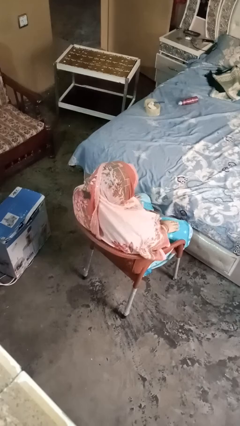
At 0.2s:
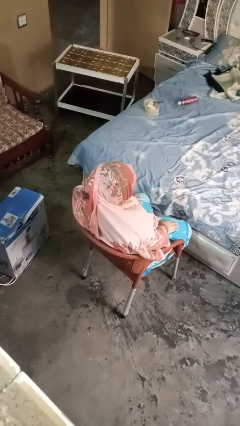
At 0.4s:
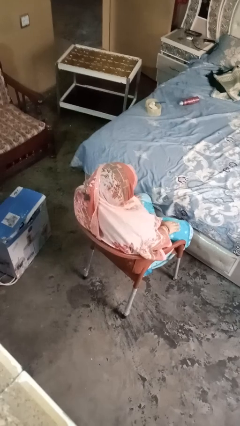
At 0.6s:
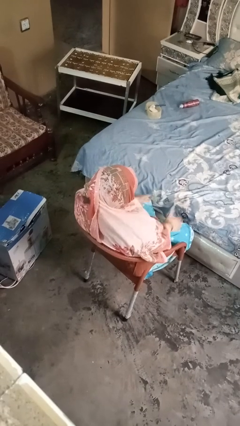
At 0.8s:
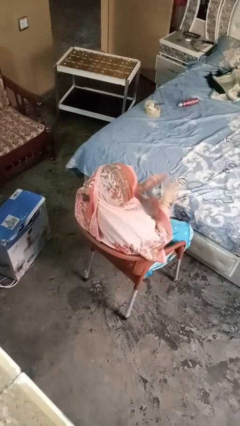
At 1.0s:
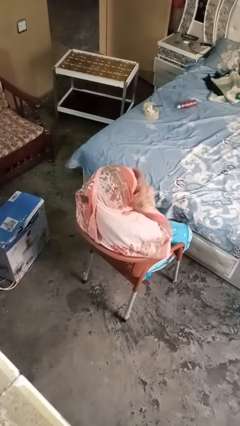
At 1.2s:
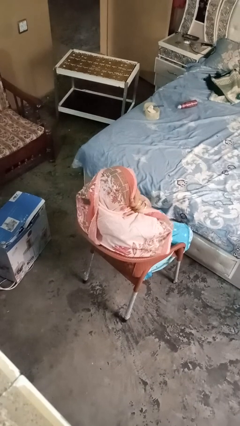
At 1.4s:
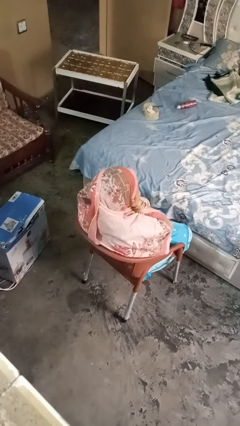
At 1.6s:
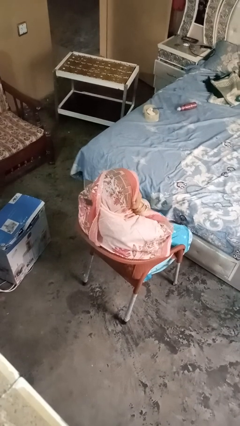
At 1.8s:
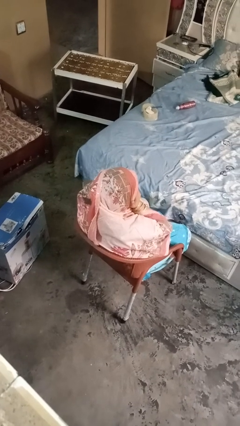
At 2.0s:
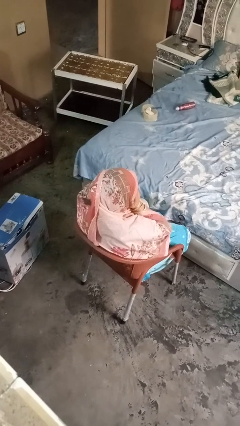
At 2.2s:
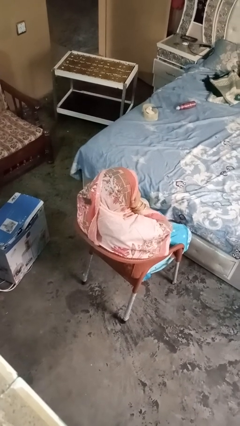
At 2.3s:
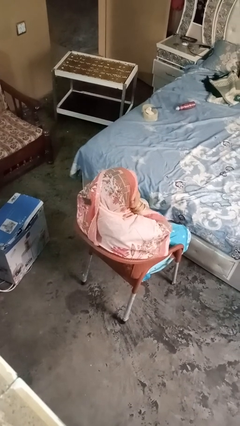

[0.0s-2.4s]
person covers face with hands

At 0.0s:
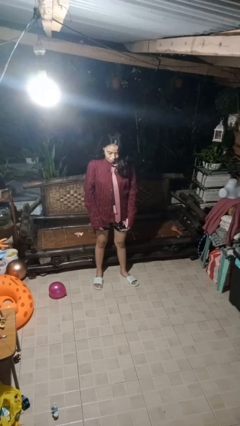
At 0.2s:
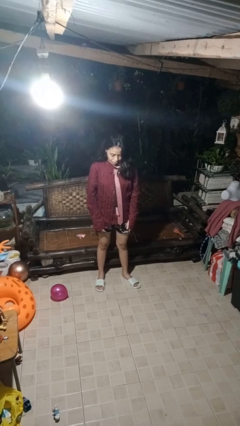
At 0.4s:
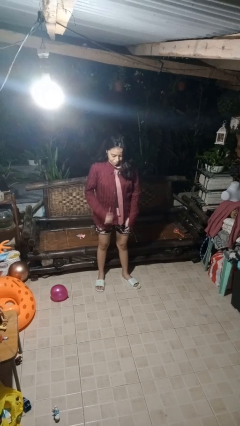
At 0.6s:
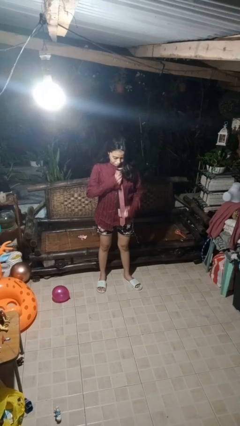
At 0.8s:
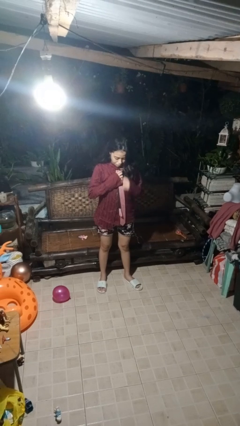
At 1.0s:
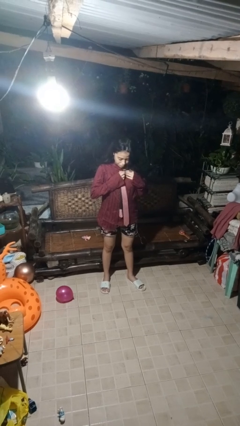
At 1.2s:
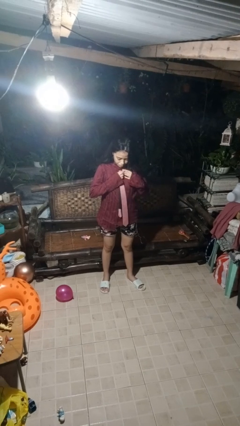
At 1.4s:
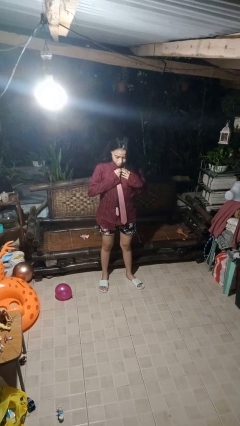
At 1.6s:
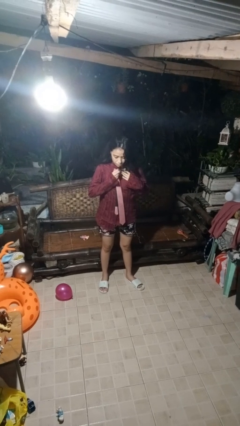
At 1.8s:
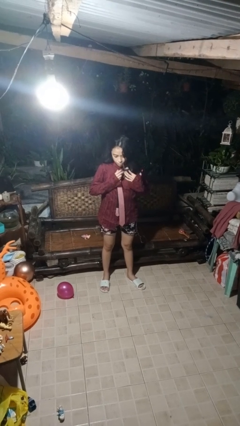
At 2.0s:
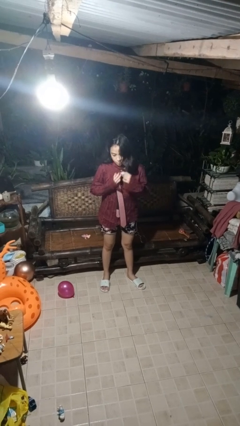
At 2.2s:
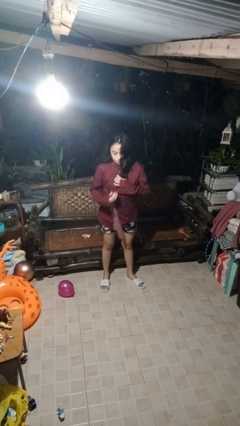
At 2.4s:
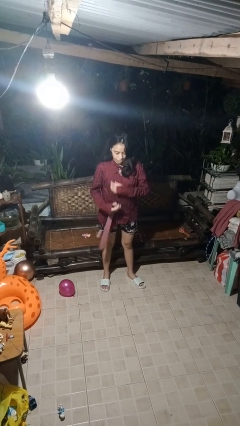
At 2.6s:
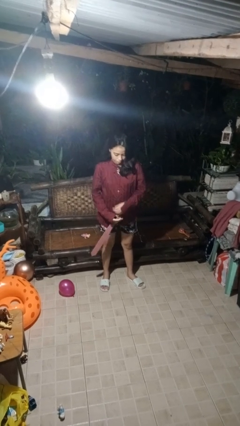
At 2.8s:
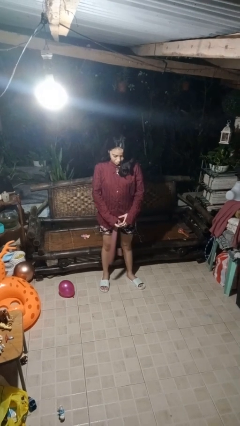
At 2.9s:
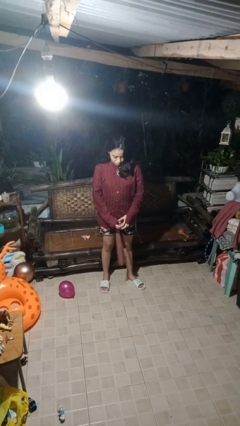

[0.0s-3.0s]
person takes off necktie

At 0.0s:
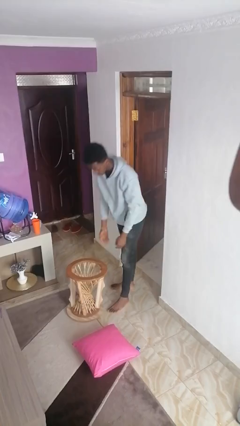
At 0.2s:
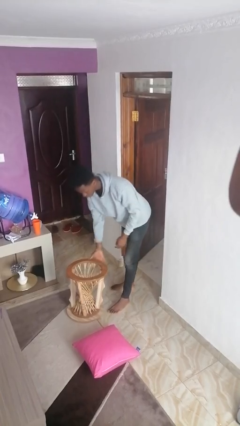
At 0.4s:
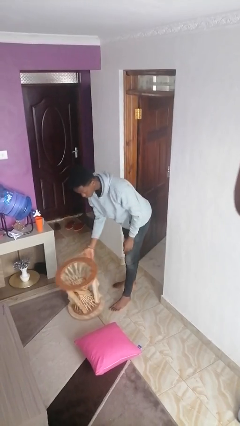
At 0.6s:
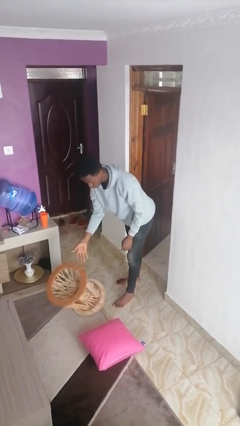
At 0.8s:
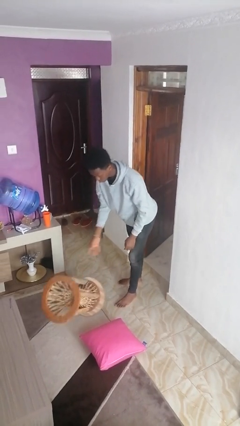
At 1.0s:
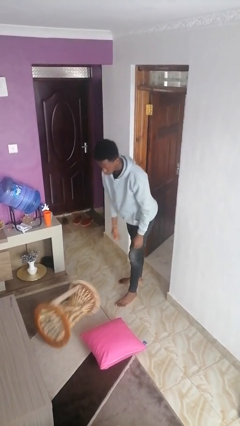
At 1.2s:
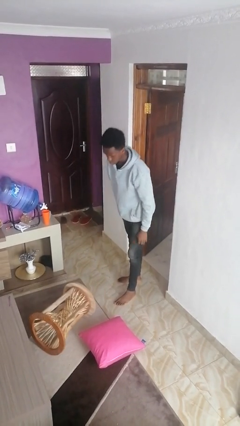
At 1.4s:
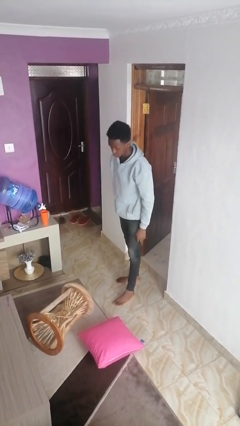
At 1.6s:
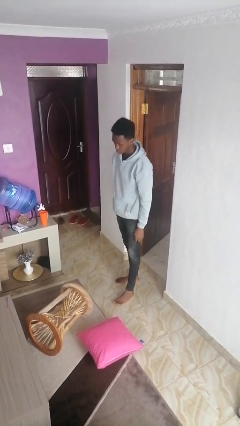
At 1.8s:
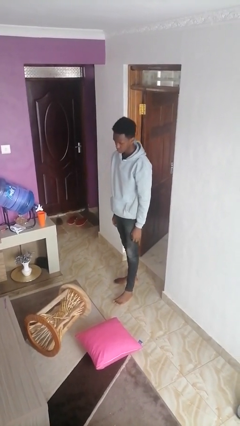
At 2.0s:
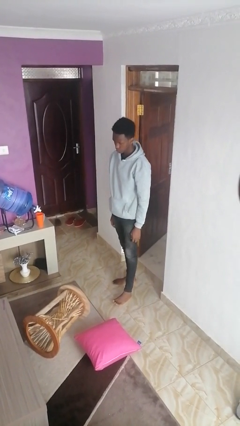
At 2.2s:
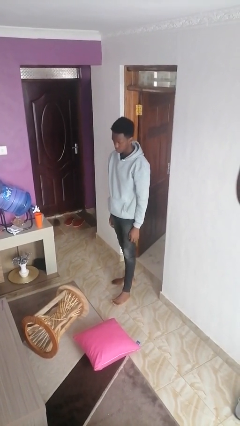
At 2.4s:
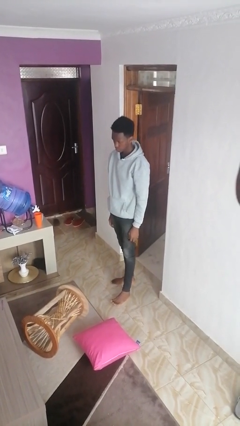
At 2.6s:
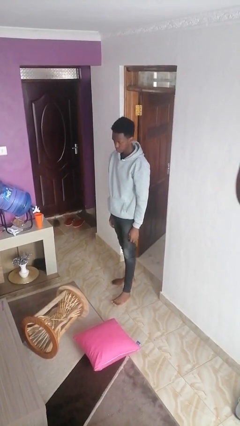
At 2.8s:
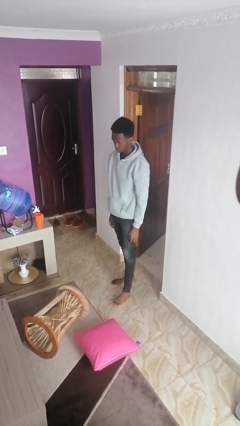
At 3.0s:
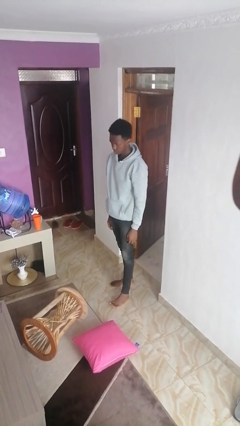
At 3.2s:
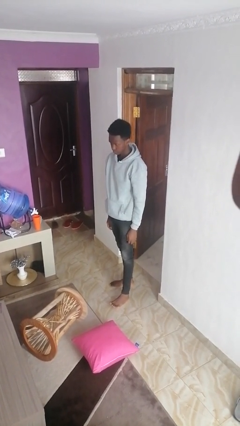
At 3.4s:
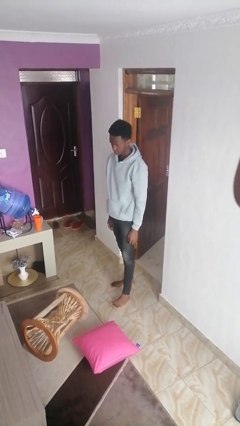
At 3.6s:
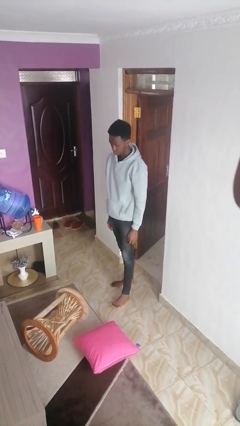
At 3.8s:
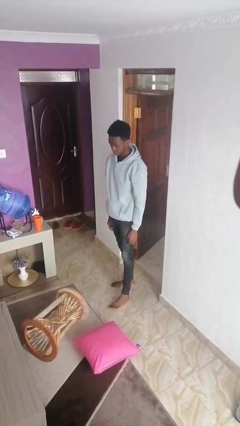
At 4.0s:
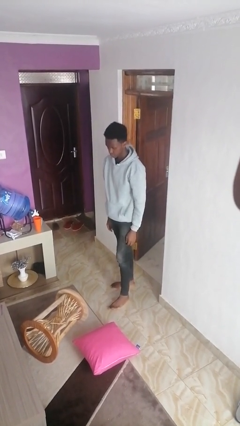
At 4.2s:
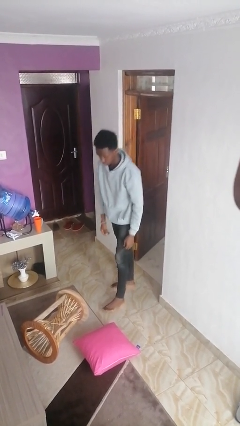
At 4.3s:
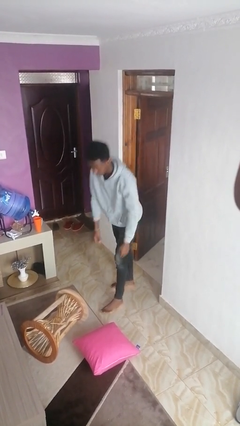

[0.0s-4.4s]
person knocks over furniture

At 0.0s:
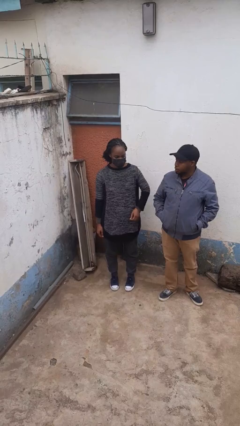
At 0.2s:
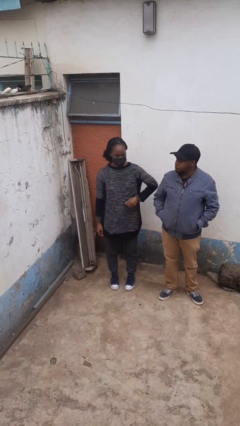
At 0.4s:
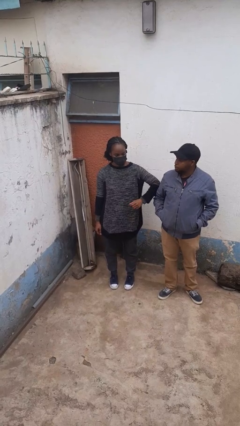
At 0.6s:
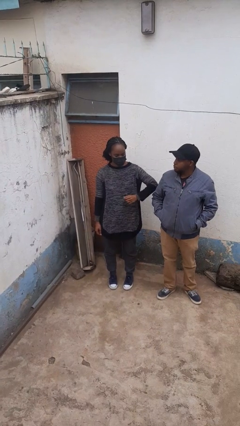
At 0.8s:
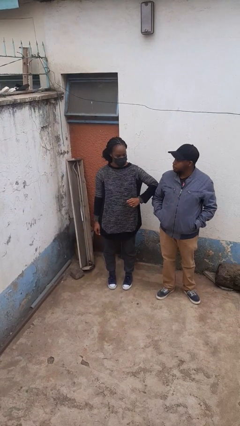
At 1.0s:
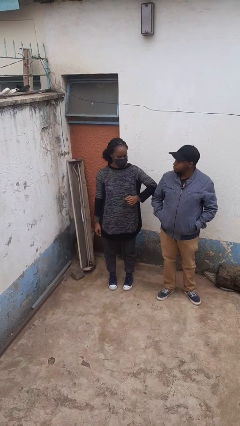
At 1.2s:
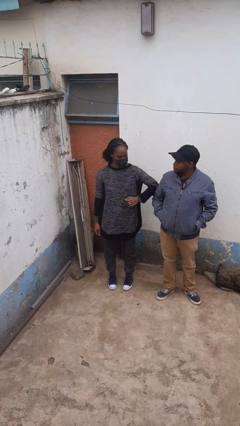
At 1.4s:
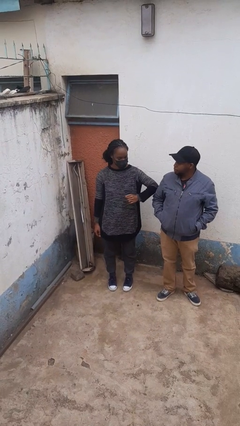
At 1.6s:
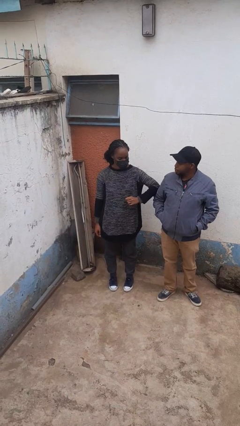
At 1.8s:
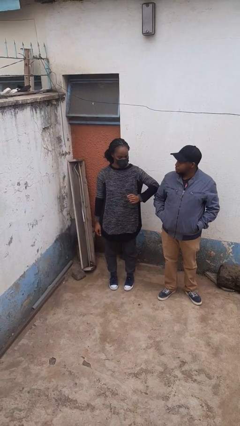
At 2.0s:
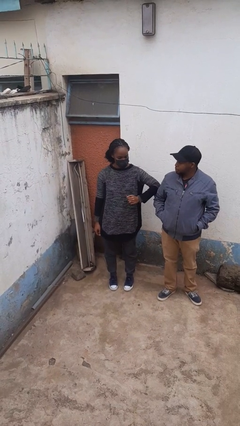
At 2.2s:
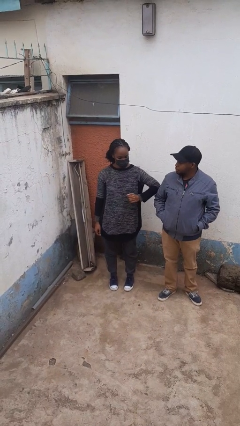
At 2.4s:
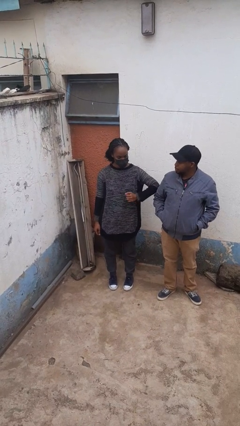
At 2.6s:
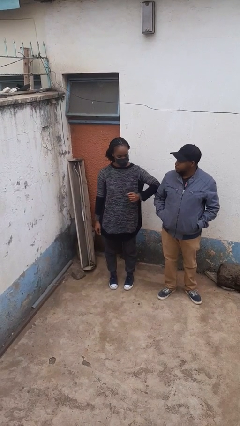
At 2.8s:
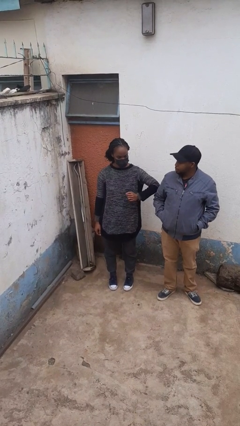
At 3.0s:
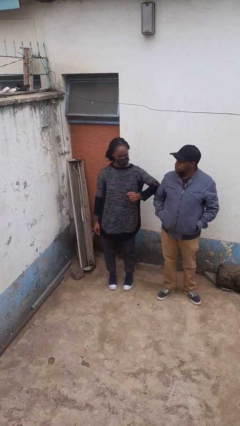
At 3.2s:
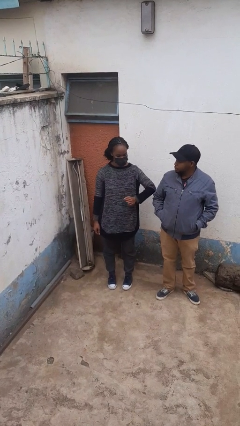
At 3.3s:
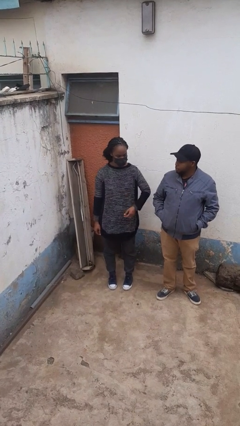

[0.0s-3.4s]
person nudges person with elbow

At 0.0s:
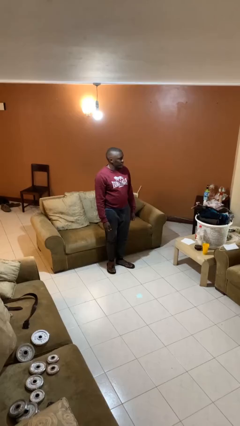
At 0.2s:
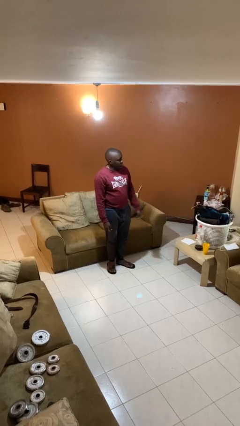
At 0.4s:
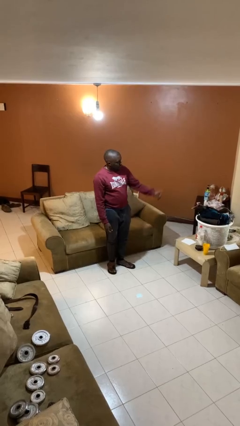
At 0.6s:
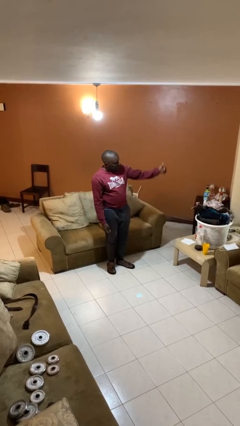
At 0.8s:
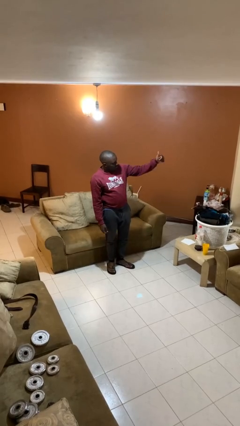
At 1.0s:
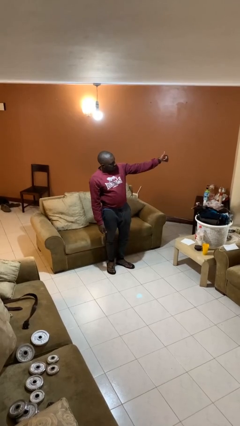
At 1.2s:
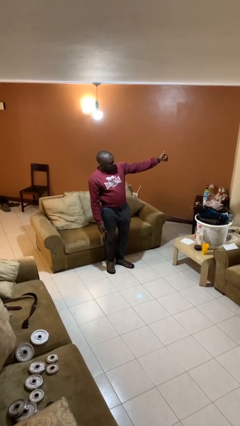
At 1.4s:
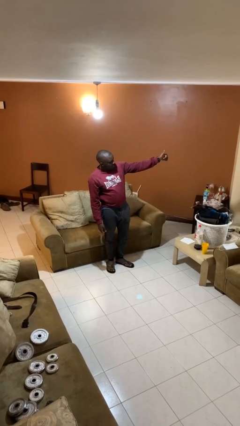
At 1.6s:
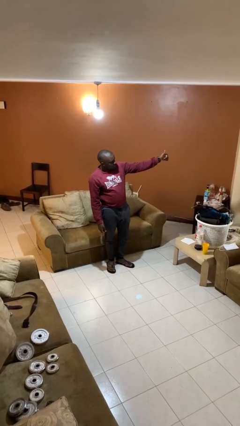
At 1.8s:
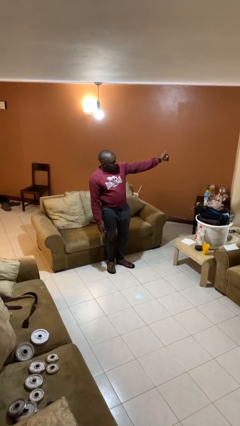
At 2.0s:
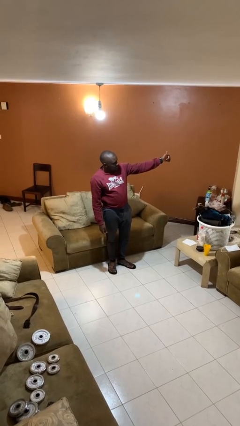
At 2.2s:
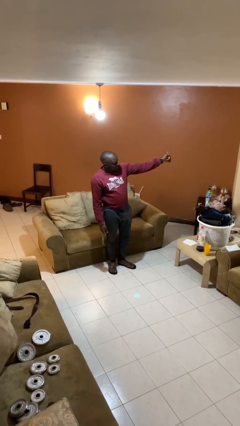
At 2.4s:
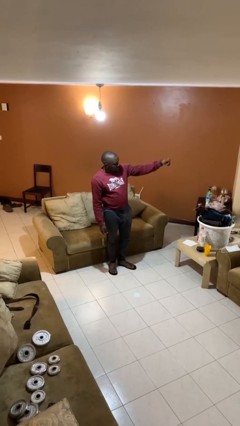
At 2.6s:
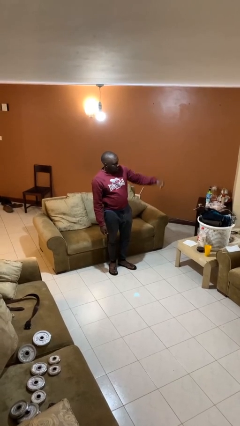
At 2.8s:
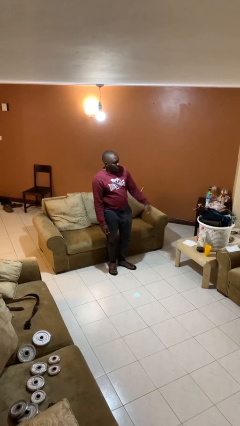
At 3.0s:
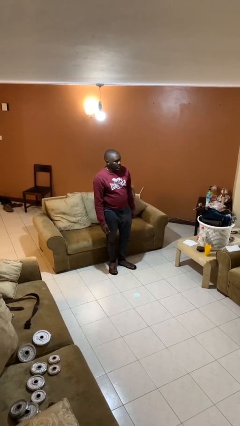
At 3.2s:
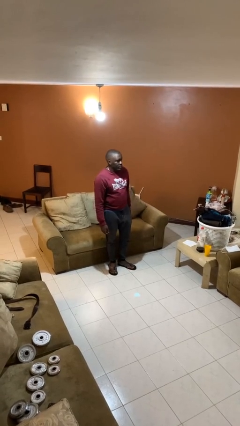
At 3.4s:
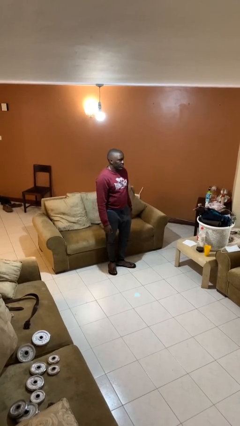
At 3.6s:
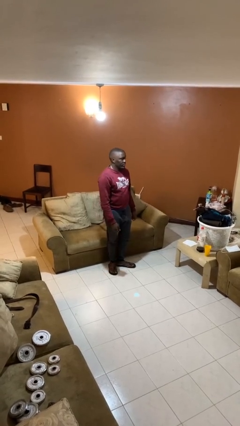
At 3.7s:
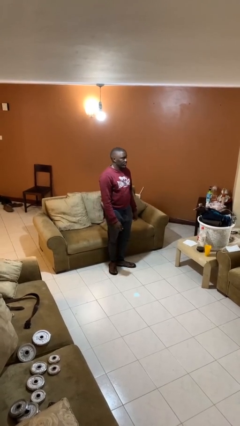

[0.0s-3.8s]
person gestures thumbs up

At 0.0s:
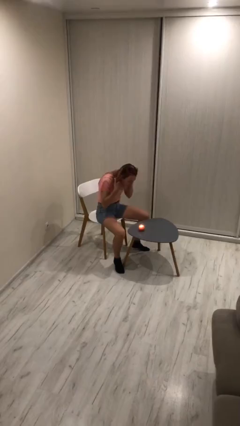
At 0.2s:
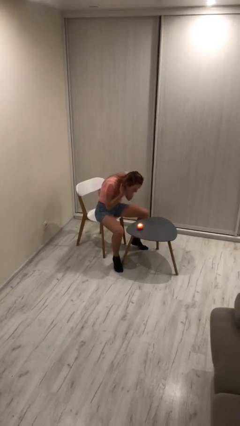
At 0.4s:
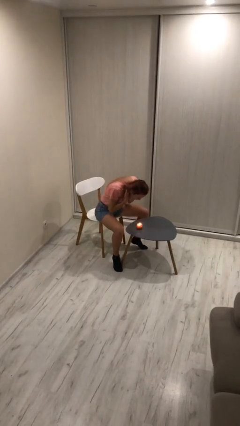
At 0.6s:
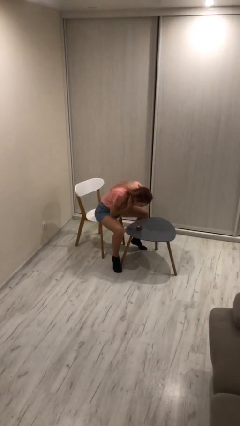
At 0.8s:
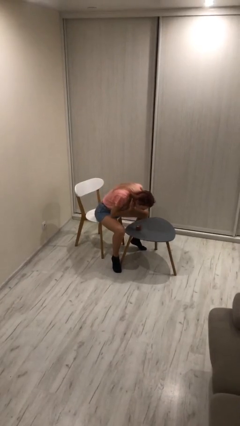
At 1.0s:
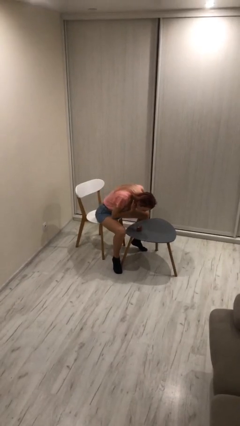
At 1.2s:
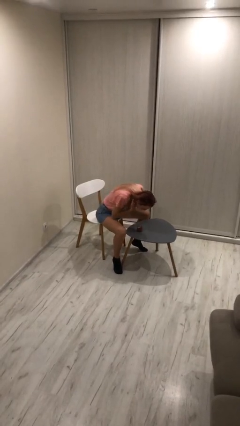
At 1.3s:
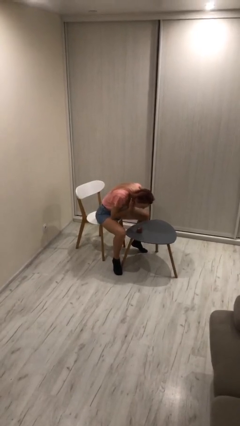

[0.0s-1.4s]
person extinguishes candle
